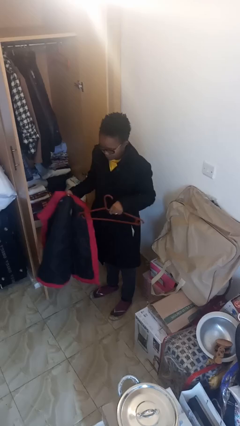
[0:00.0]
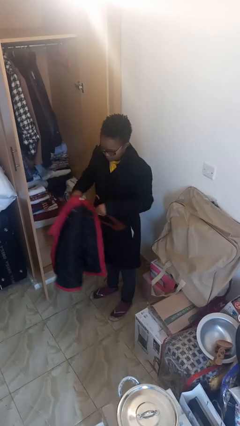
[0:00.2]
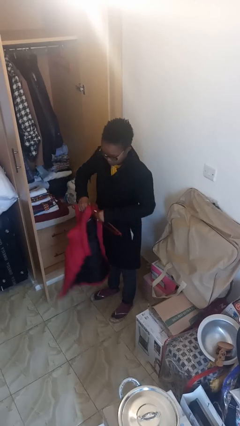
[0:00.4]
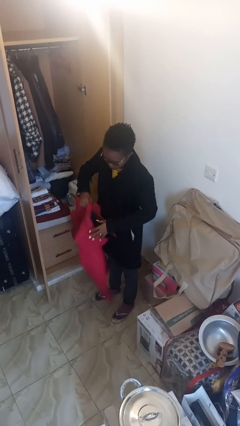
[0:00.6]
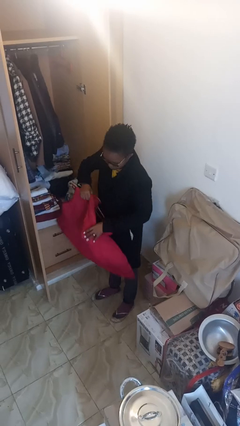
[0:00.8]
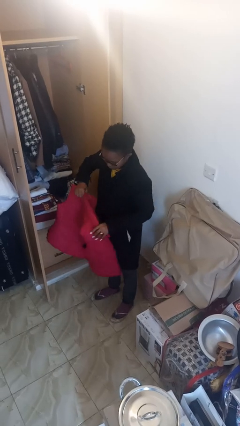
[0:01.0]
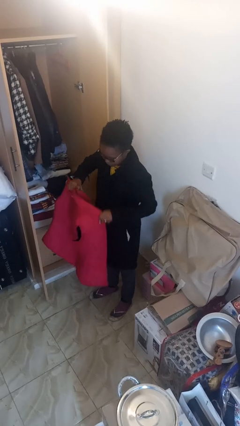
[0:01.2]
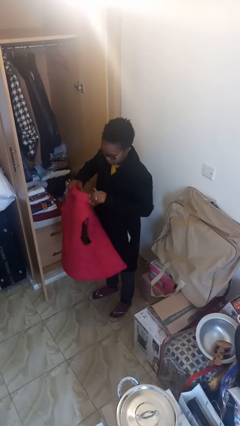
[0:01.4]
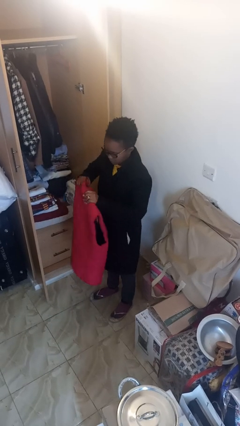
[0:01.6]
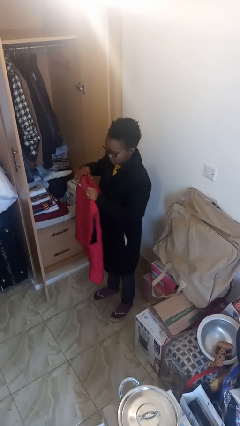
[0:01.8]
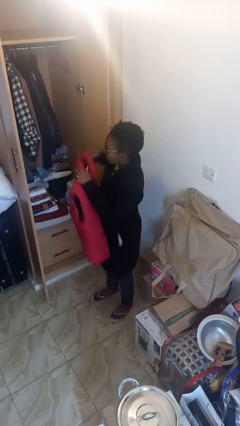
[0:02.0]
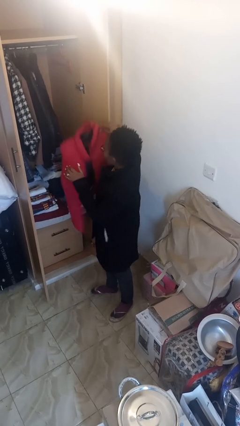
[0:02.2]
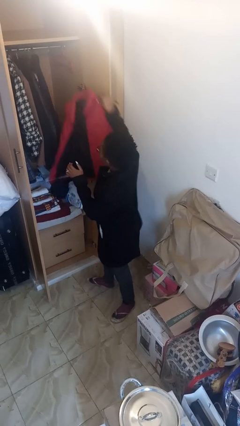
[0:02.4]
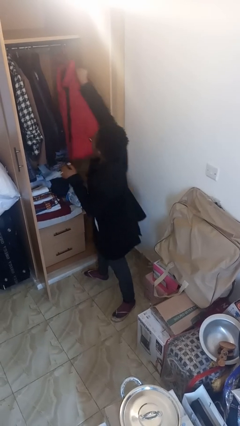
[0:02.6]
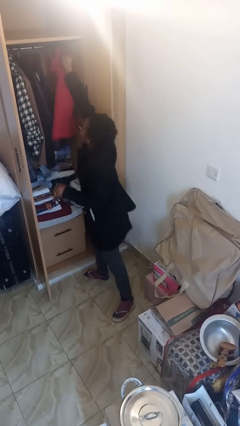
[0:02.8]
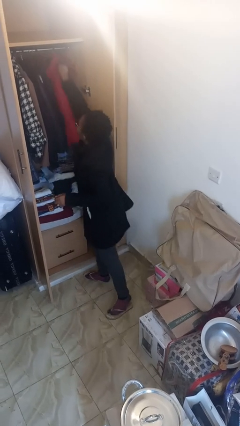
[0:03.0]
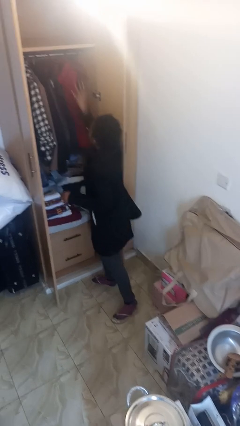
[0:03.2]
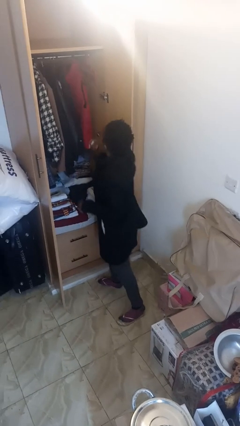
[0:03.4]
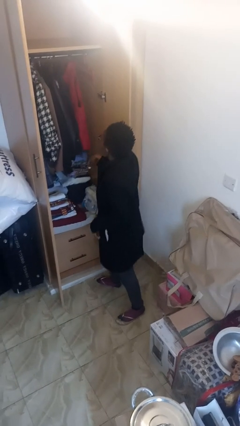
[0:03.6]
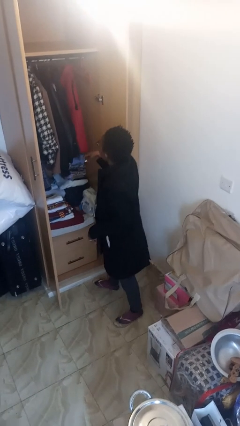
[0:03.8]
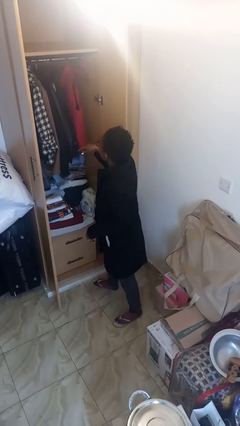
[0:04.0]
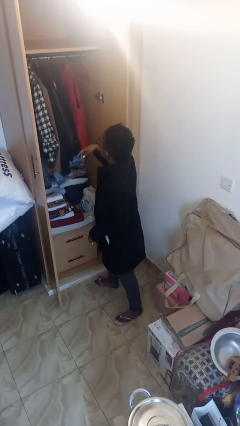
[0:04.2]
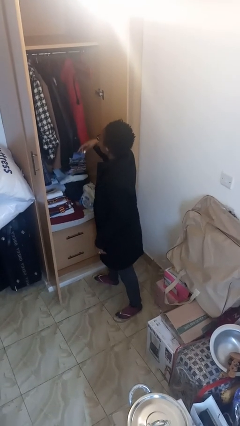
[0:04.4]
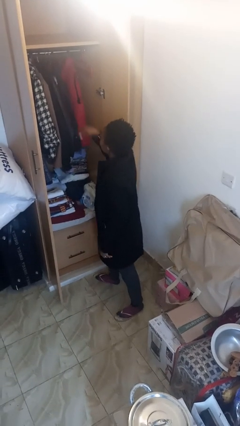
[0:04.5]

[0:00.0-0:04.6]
person puts clothes into closet

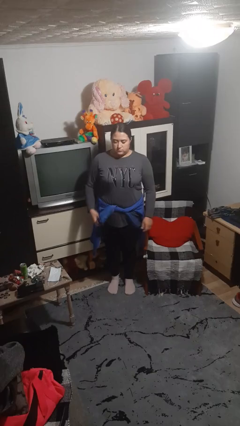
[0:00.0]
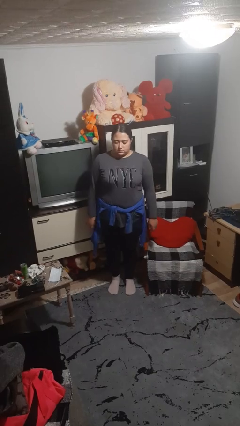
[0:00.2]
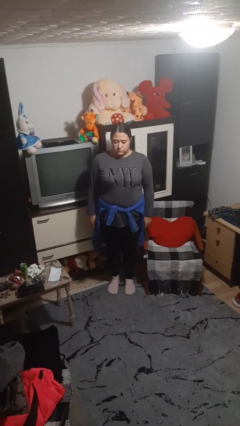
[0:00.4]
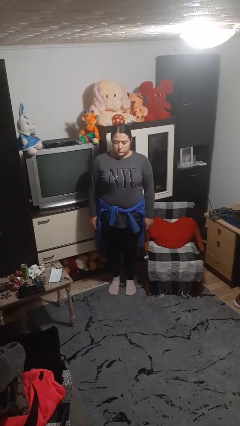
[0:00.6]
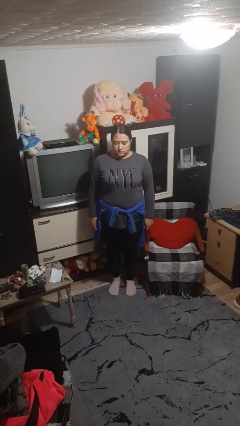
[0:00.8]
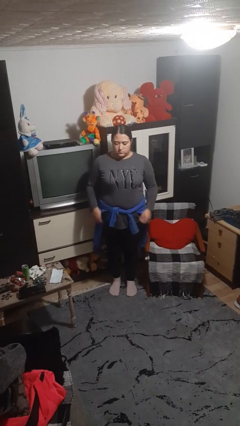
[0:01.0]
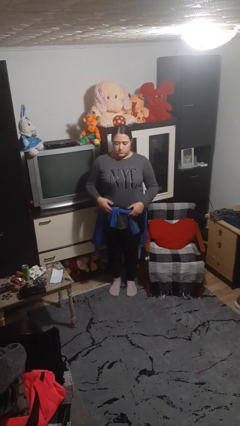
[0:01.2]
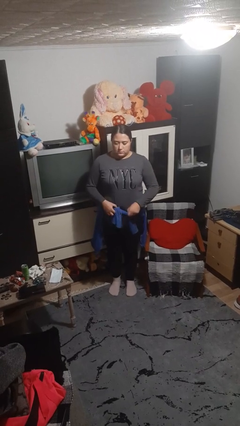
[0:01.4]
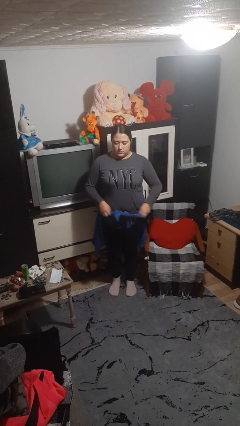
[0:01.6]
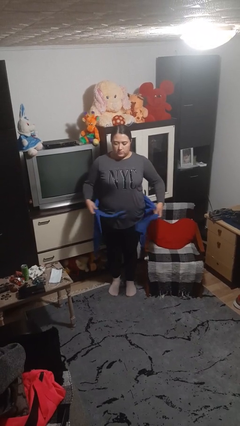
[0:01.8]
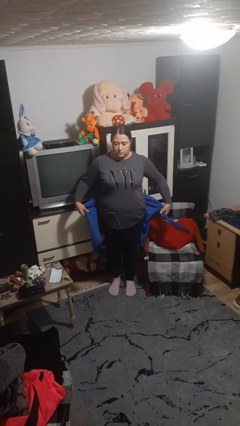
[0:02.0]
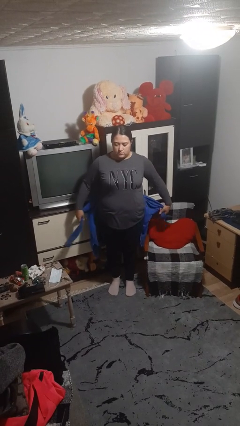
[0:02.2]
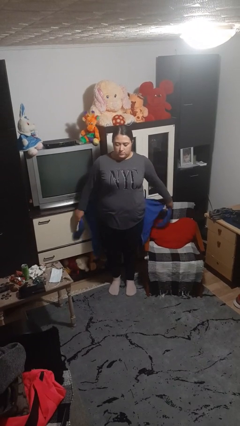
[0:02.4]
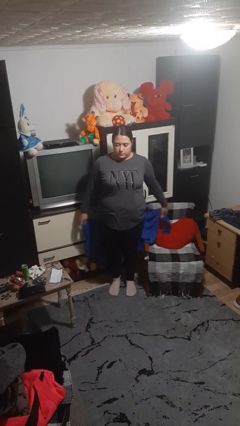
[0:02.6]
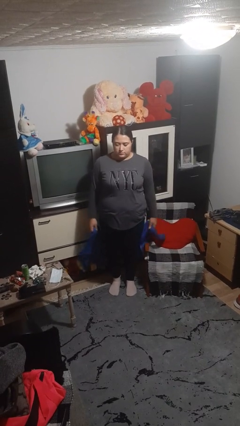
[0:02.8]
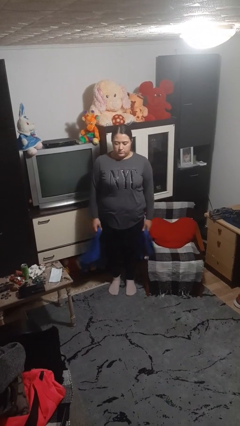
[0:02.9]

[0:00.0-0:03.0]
person unties jacket around waist

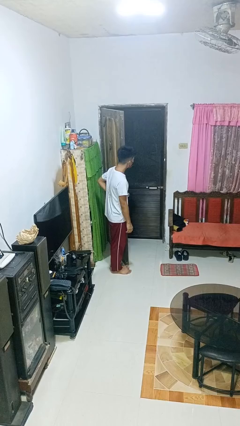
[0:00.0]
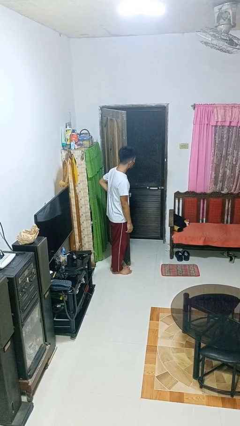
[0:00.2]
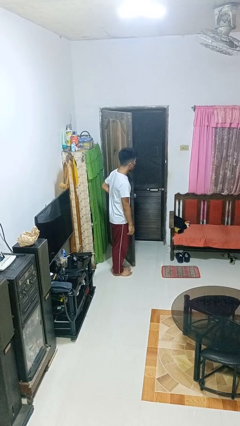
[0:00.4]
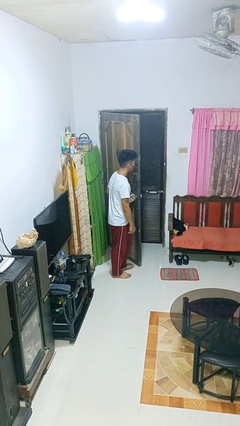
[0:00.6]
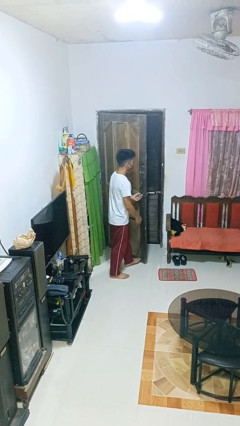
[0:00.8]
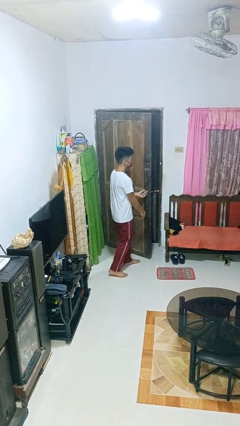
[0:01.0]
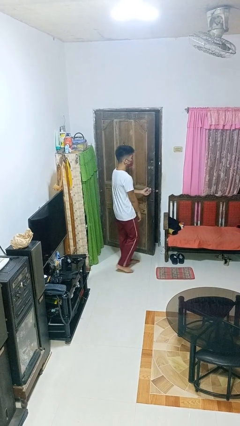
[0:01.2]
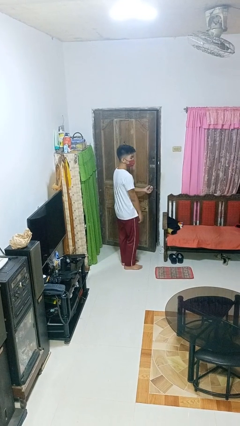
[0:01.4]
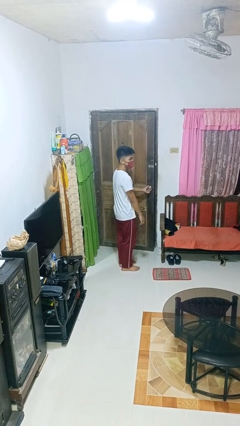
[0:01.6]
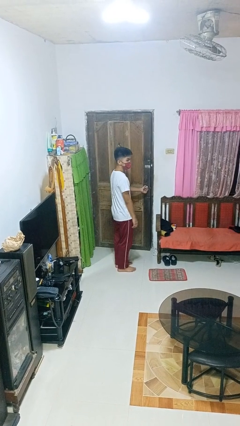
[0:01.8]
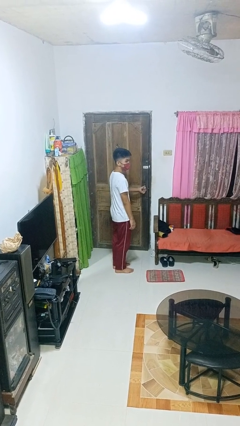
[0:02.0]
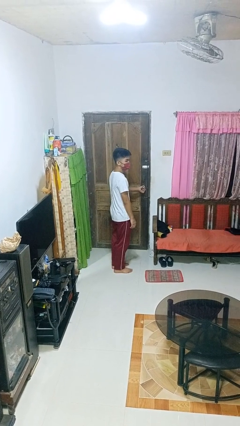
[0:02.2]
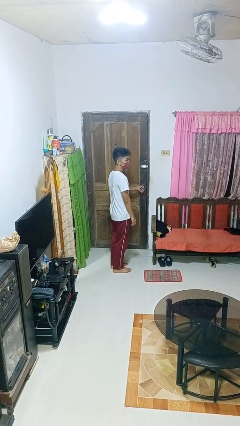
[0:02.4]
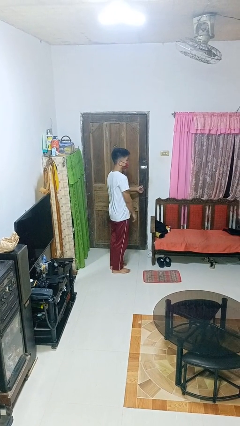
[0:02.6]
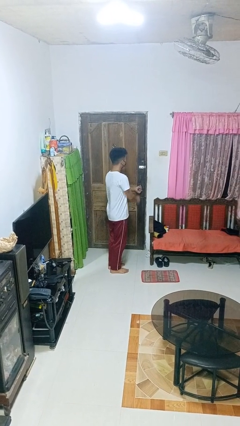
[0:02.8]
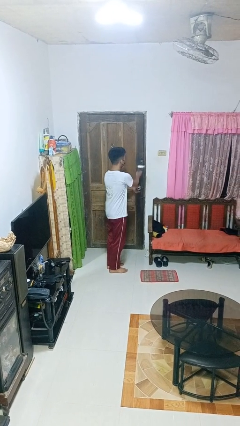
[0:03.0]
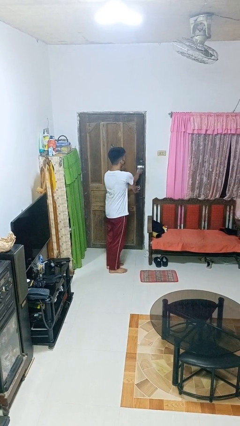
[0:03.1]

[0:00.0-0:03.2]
person closes facility door

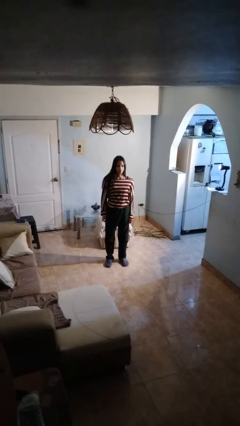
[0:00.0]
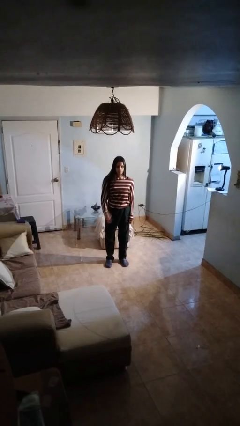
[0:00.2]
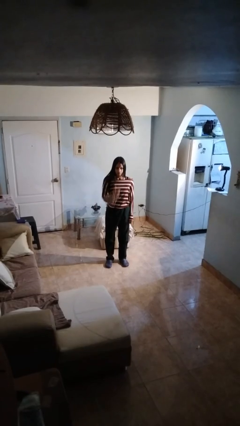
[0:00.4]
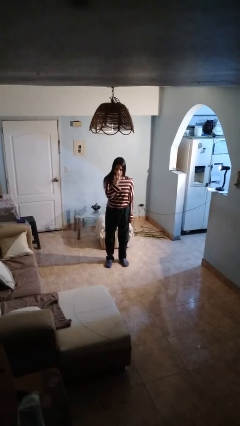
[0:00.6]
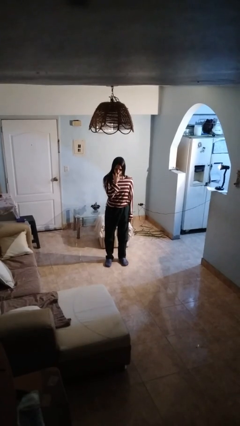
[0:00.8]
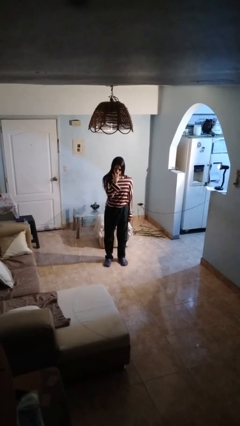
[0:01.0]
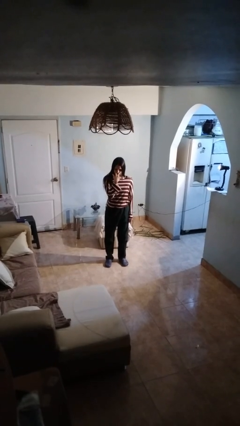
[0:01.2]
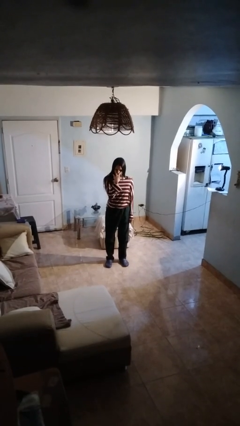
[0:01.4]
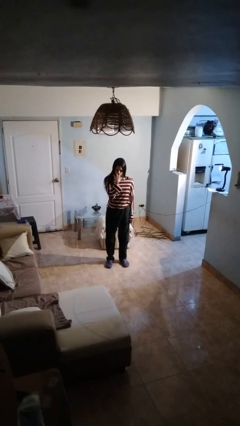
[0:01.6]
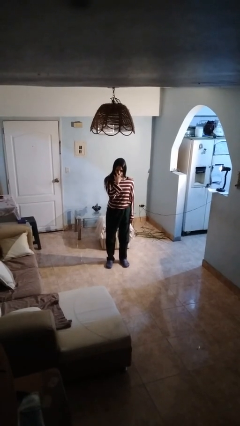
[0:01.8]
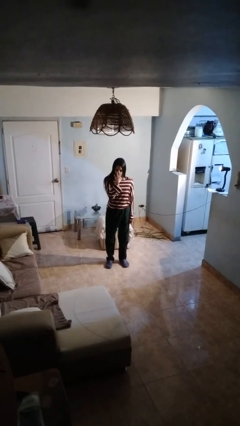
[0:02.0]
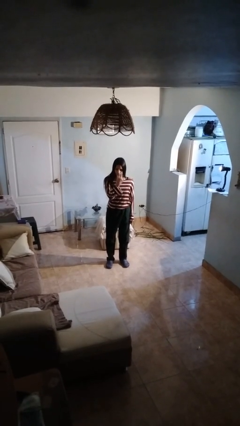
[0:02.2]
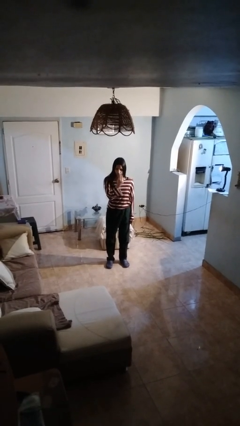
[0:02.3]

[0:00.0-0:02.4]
person gestures watch closely

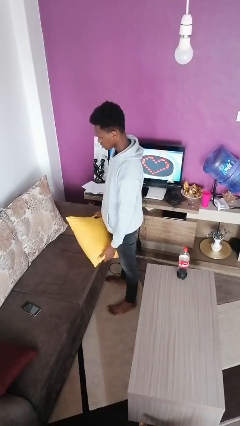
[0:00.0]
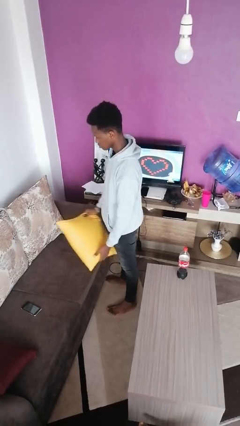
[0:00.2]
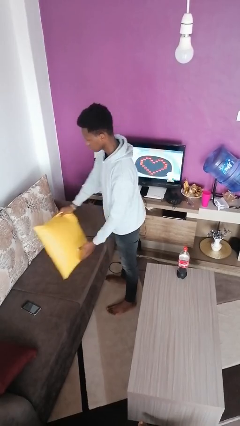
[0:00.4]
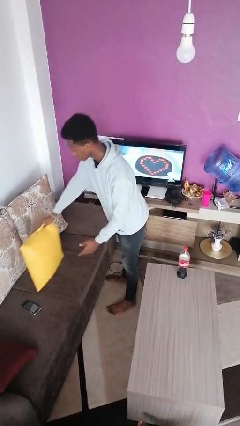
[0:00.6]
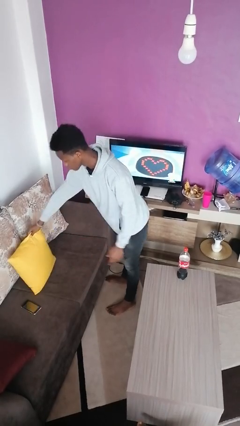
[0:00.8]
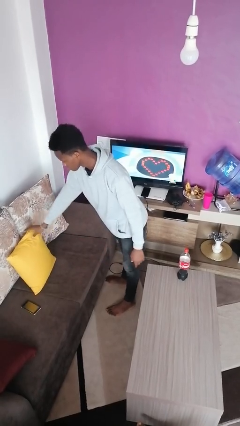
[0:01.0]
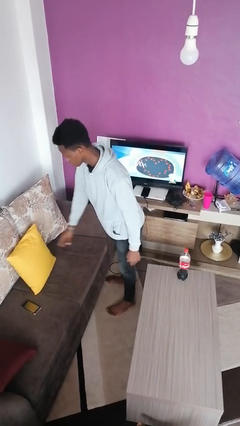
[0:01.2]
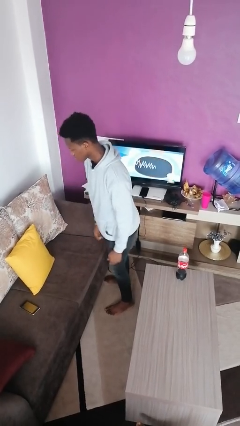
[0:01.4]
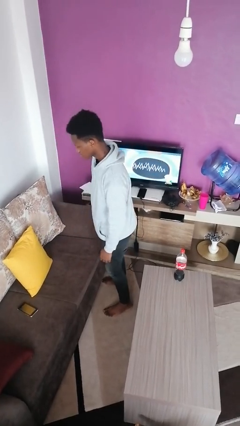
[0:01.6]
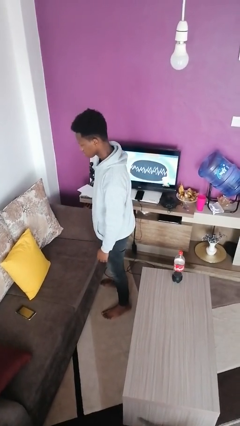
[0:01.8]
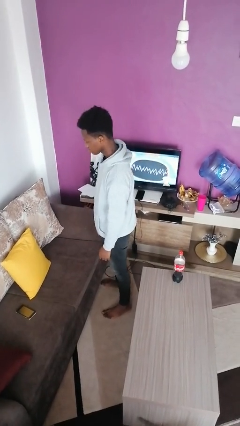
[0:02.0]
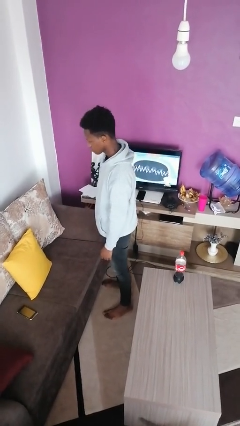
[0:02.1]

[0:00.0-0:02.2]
person puts down object on couch

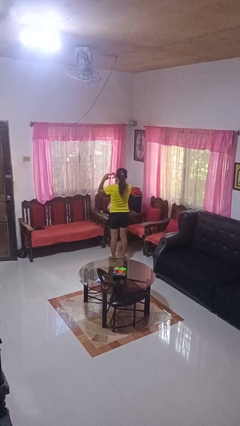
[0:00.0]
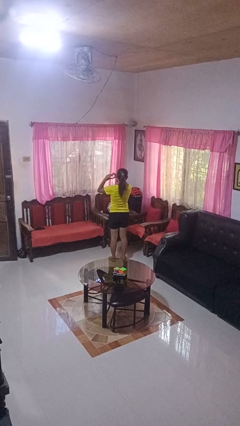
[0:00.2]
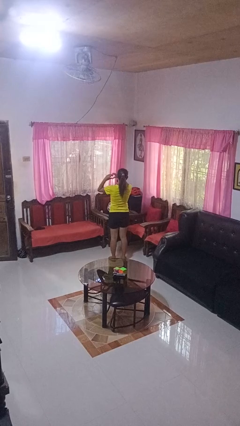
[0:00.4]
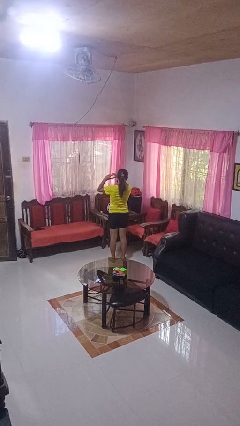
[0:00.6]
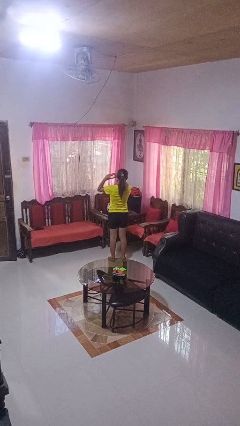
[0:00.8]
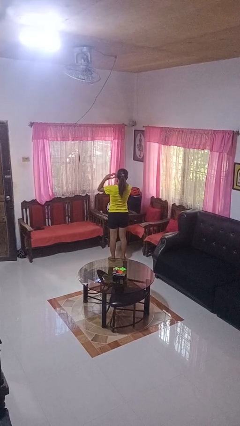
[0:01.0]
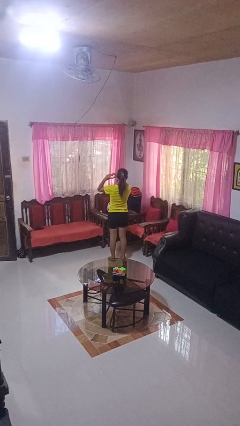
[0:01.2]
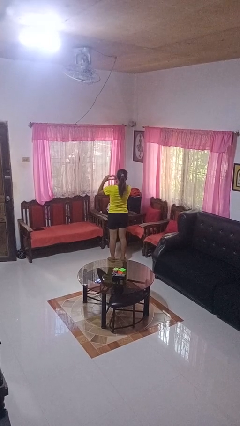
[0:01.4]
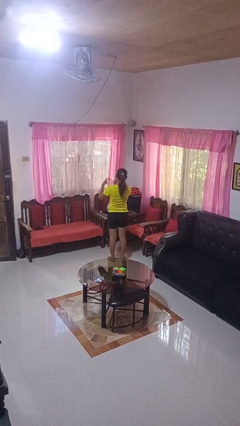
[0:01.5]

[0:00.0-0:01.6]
person gestures heart
